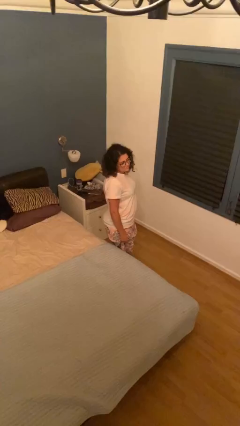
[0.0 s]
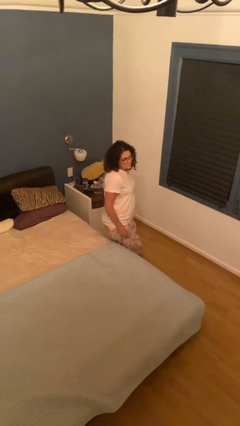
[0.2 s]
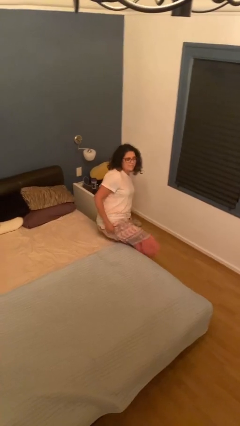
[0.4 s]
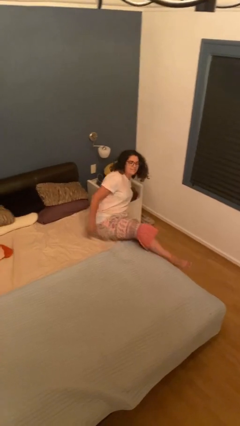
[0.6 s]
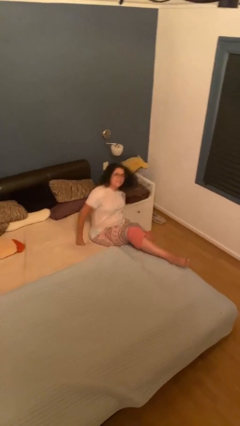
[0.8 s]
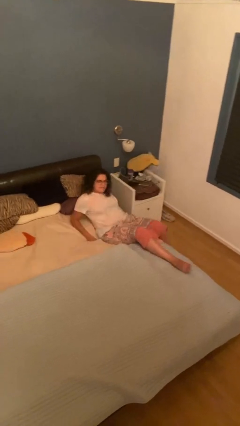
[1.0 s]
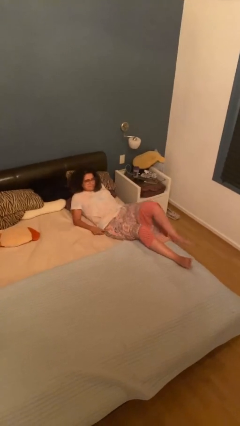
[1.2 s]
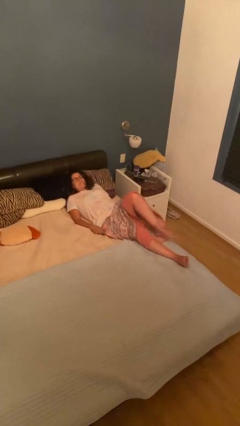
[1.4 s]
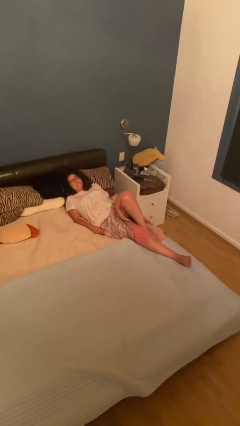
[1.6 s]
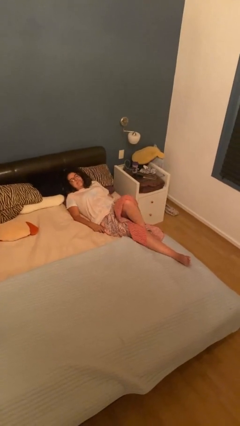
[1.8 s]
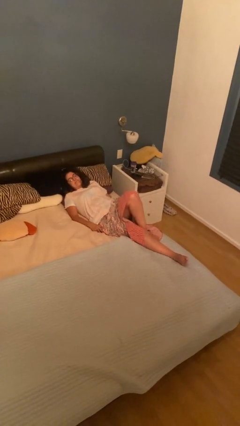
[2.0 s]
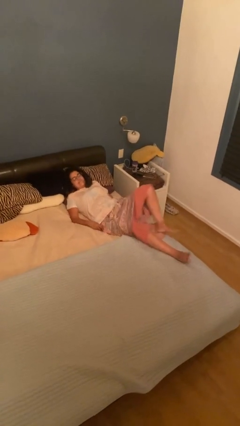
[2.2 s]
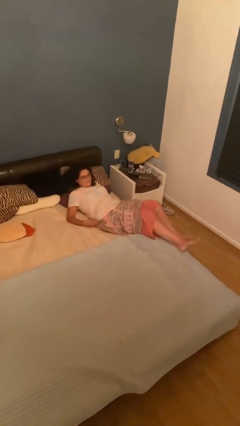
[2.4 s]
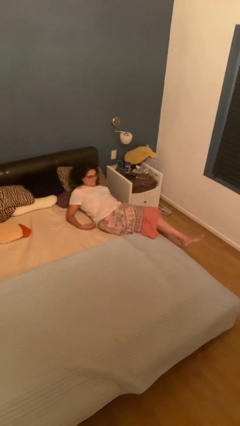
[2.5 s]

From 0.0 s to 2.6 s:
person lies down on bed

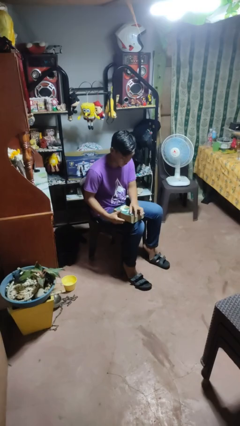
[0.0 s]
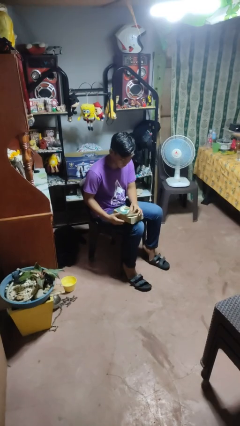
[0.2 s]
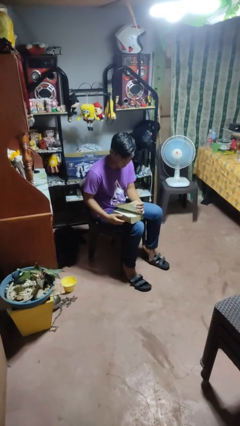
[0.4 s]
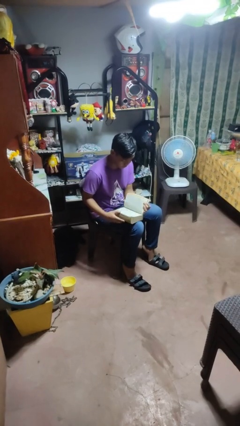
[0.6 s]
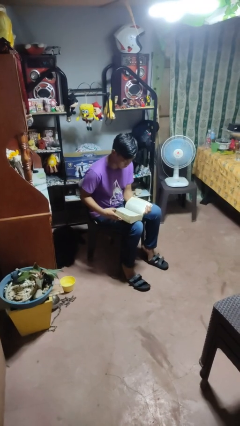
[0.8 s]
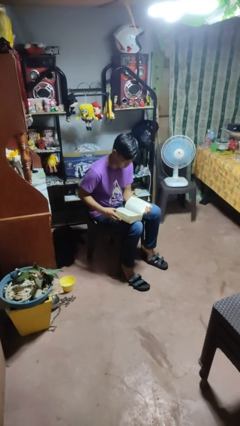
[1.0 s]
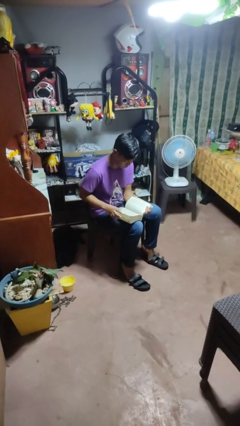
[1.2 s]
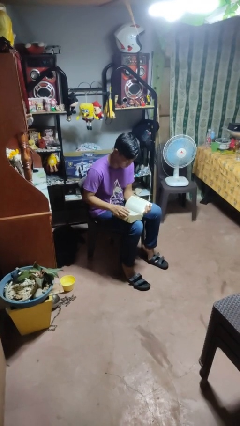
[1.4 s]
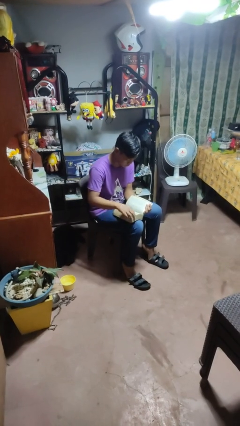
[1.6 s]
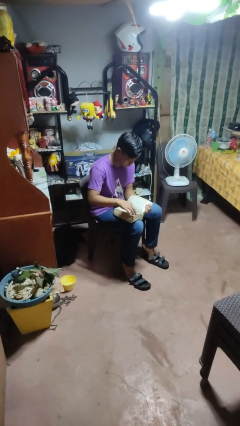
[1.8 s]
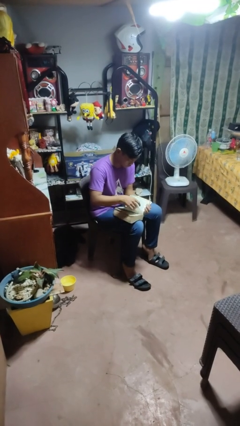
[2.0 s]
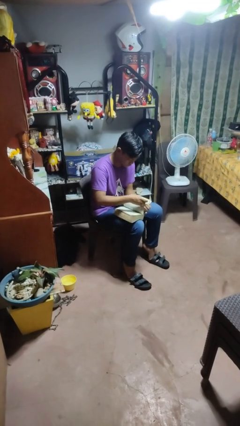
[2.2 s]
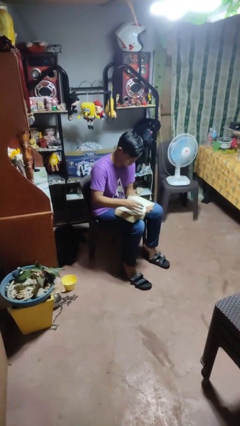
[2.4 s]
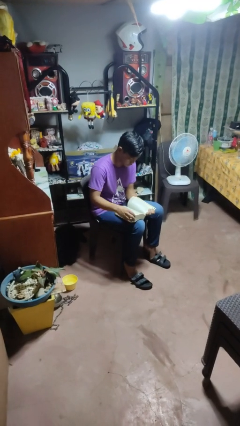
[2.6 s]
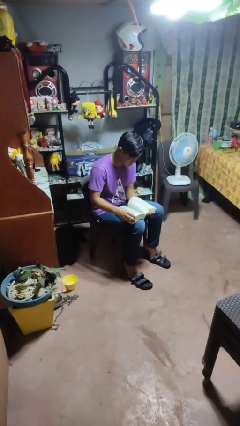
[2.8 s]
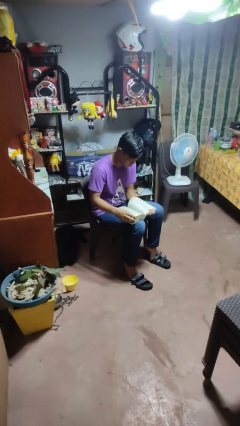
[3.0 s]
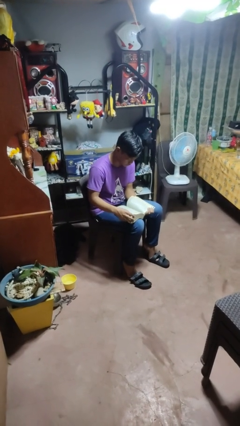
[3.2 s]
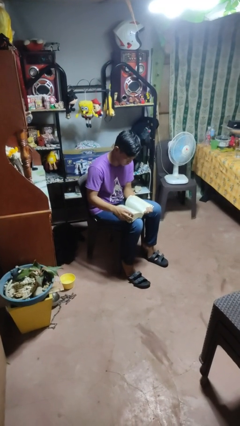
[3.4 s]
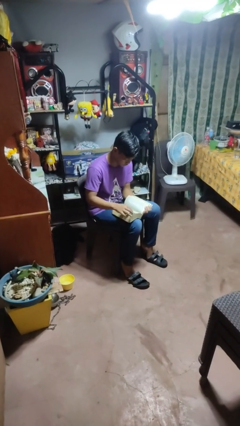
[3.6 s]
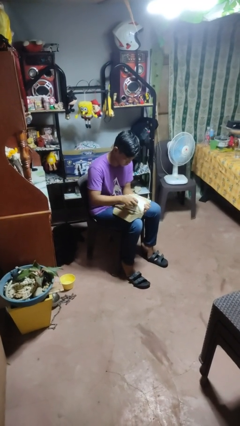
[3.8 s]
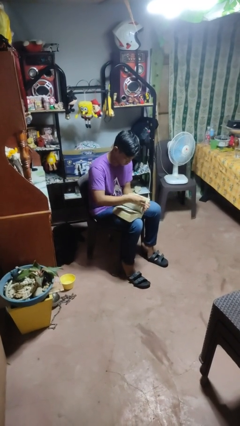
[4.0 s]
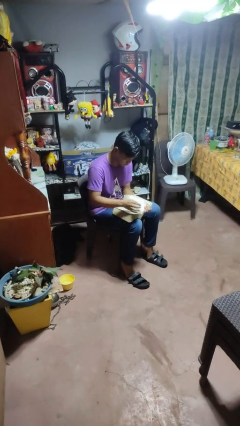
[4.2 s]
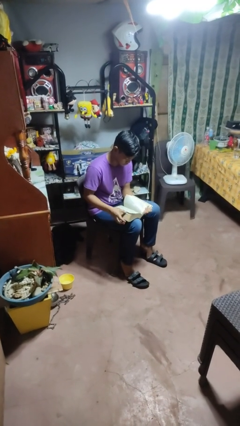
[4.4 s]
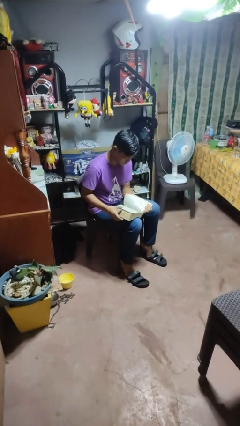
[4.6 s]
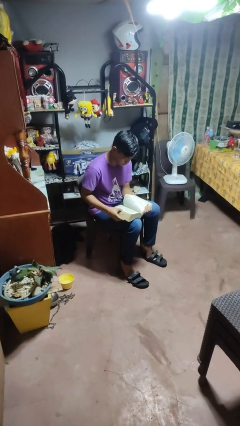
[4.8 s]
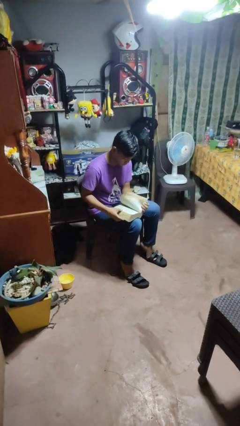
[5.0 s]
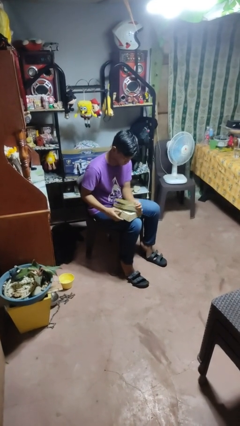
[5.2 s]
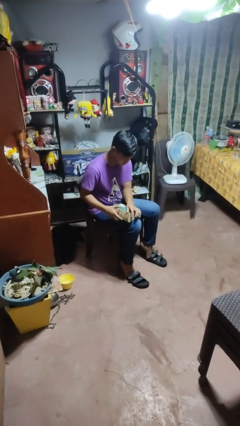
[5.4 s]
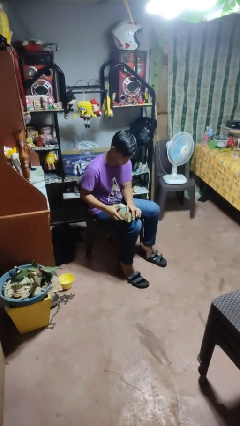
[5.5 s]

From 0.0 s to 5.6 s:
person reads book

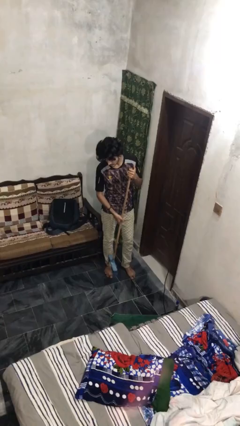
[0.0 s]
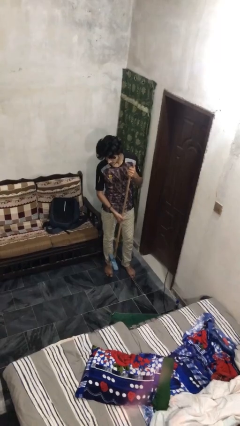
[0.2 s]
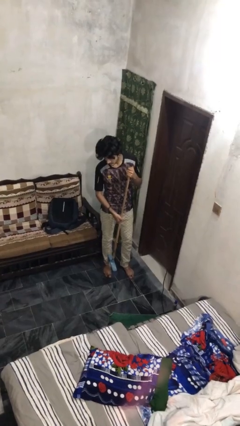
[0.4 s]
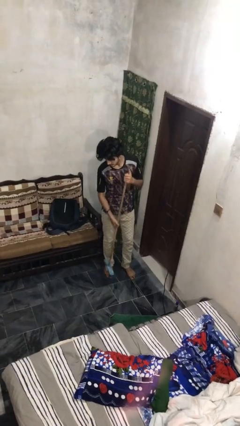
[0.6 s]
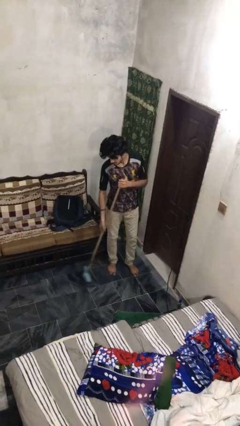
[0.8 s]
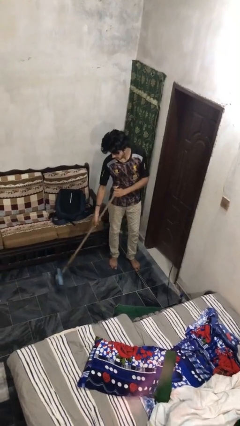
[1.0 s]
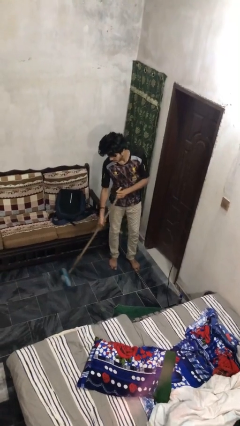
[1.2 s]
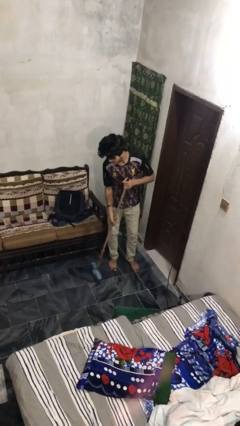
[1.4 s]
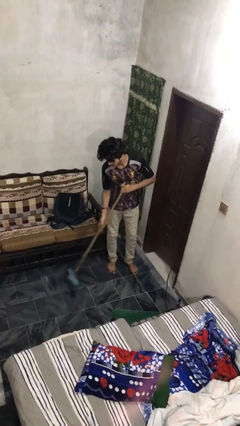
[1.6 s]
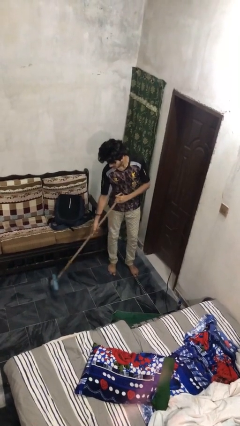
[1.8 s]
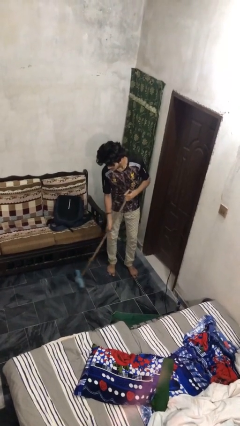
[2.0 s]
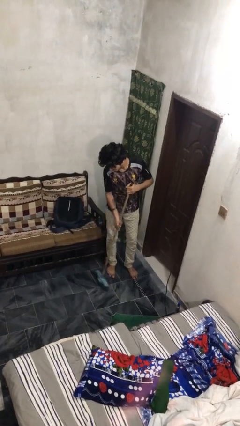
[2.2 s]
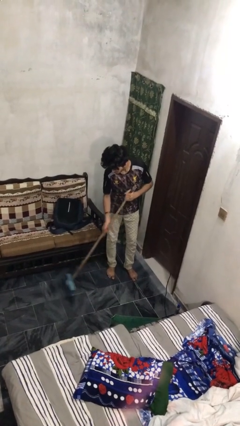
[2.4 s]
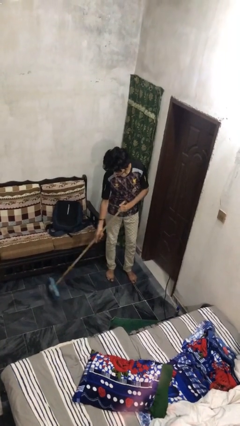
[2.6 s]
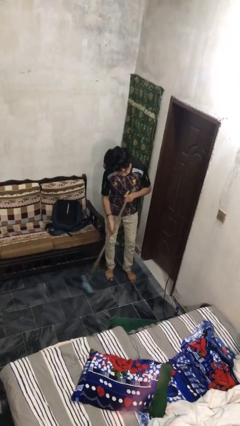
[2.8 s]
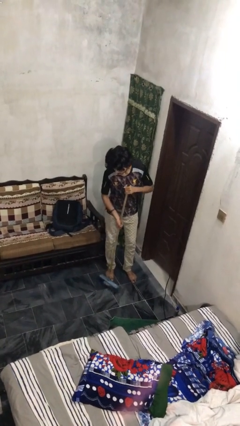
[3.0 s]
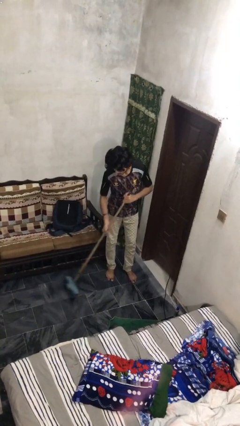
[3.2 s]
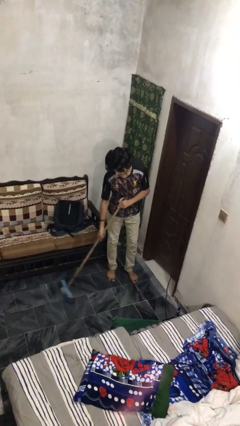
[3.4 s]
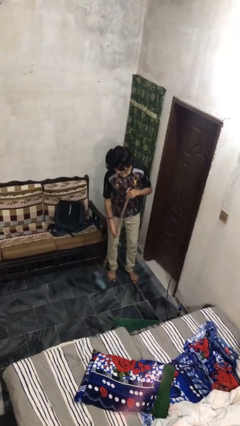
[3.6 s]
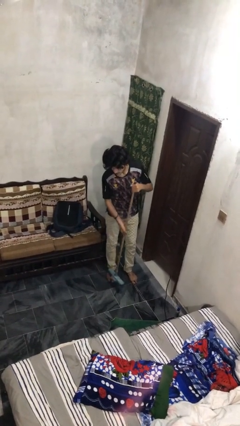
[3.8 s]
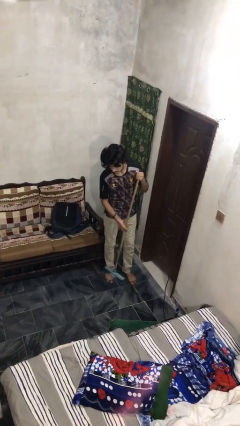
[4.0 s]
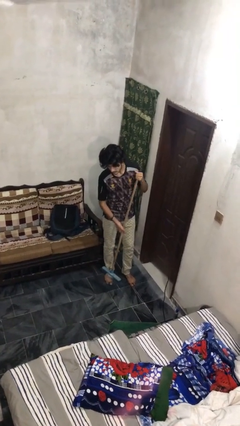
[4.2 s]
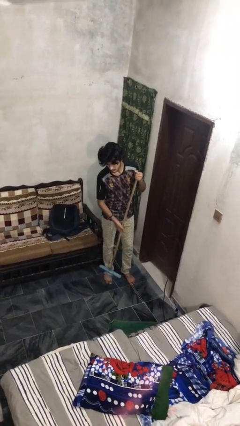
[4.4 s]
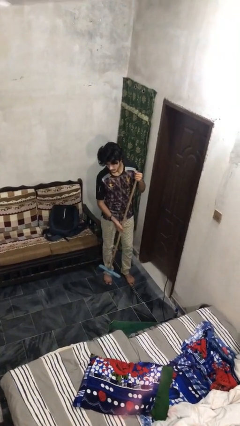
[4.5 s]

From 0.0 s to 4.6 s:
person sweeps floor

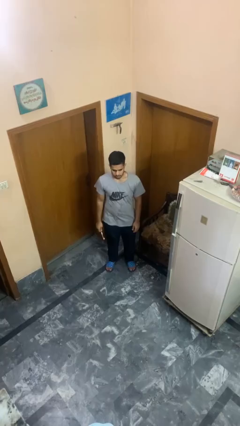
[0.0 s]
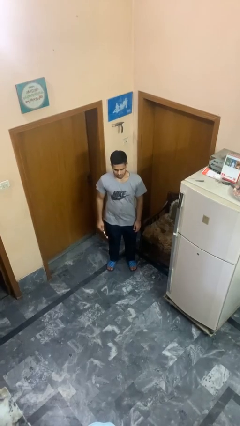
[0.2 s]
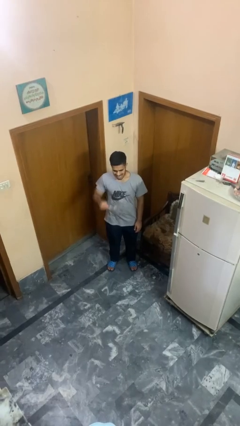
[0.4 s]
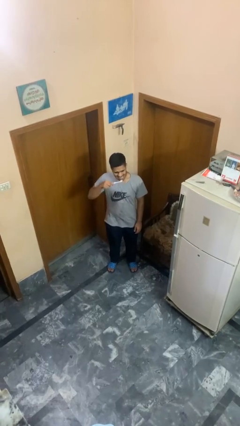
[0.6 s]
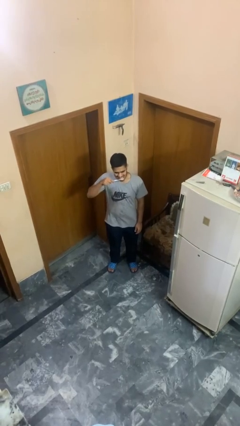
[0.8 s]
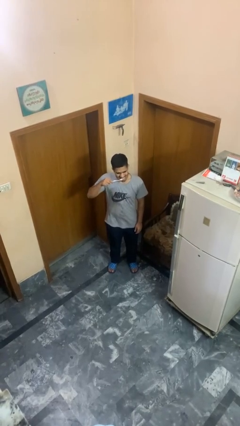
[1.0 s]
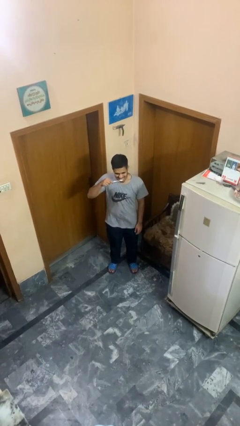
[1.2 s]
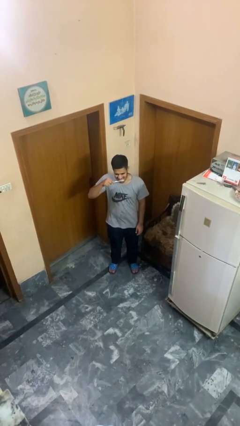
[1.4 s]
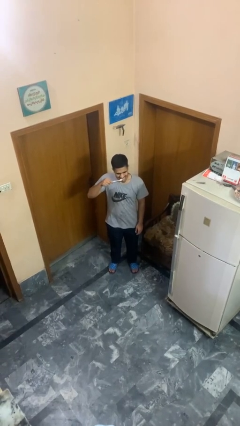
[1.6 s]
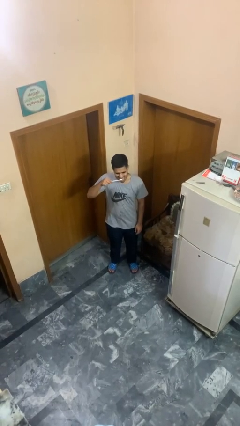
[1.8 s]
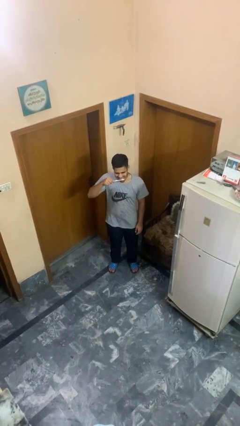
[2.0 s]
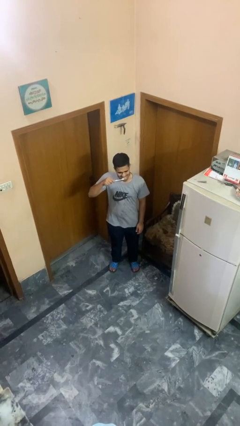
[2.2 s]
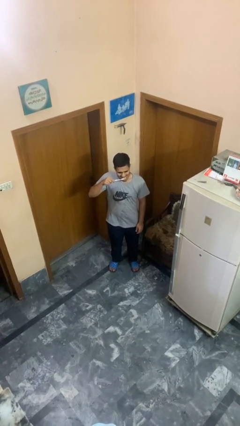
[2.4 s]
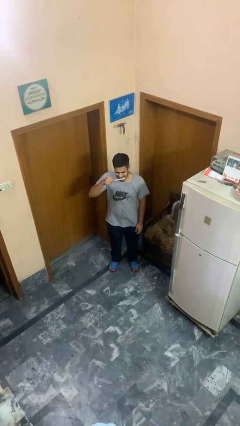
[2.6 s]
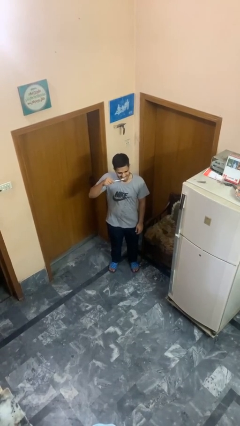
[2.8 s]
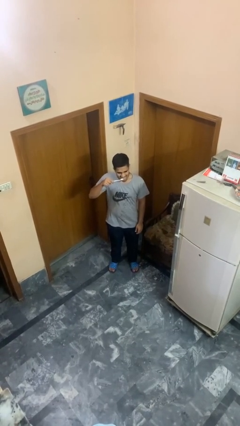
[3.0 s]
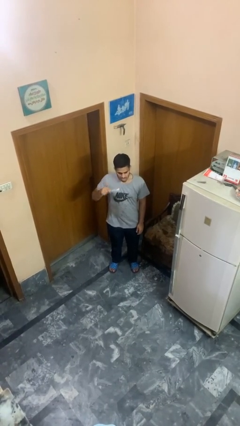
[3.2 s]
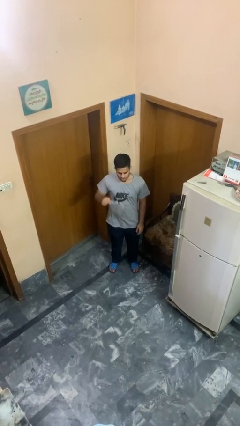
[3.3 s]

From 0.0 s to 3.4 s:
person brushes teeth

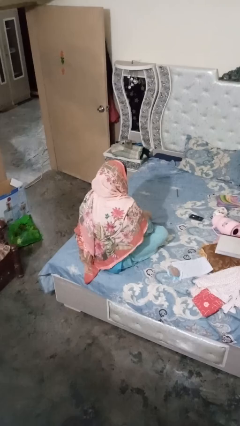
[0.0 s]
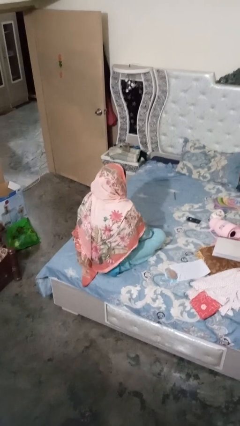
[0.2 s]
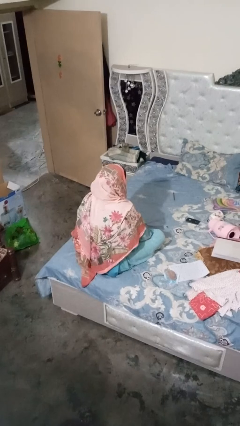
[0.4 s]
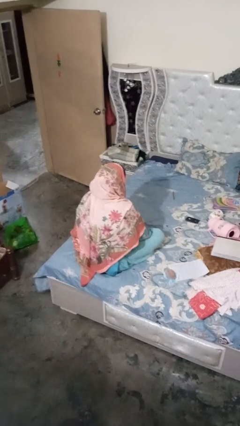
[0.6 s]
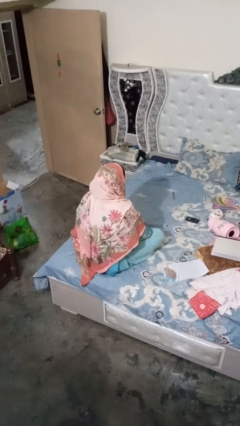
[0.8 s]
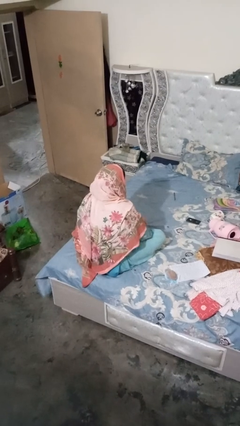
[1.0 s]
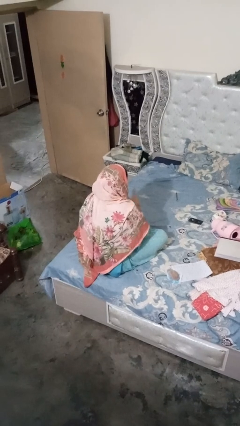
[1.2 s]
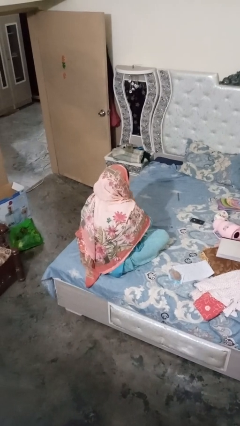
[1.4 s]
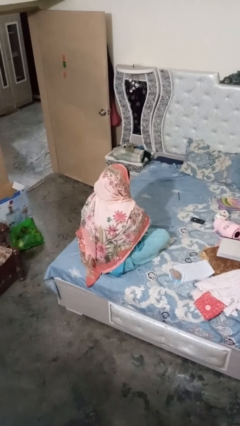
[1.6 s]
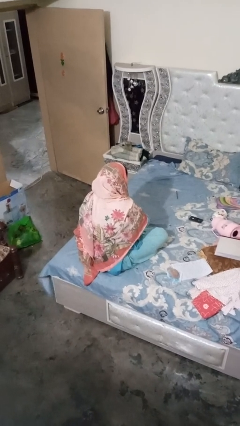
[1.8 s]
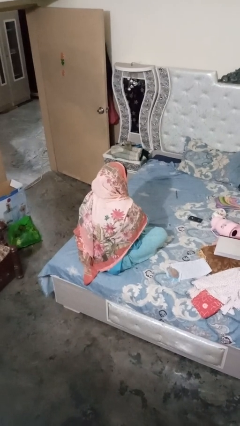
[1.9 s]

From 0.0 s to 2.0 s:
person gestures be quiet
